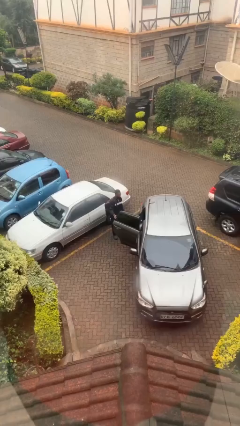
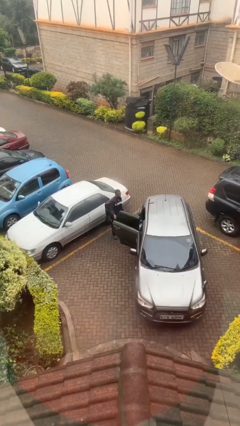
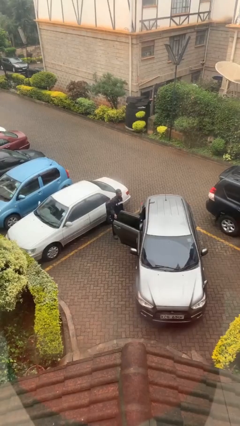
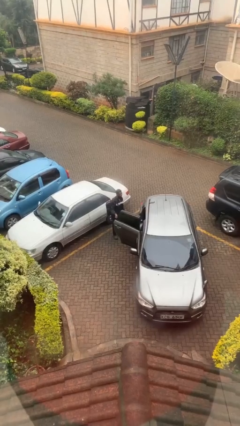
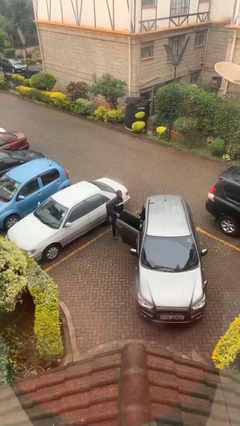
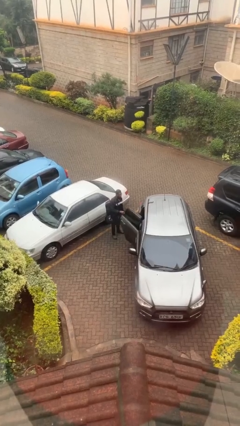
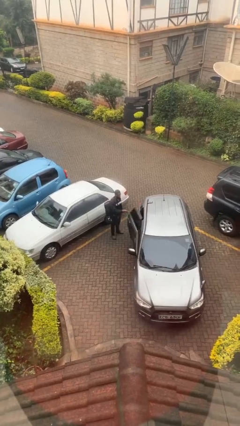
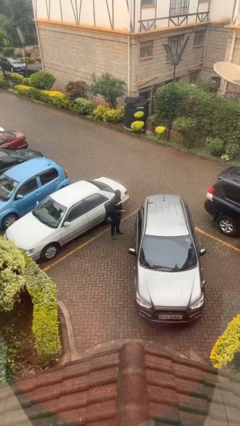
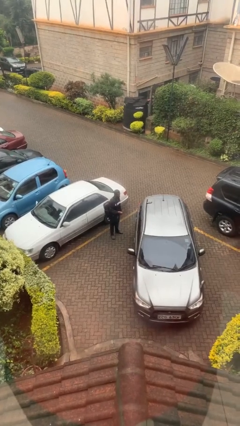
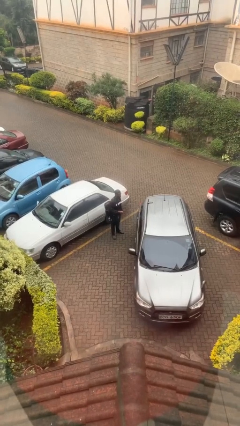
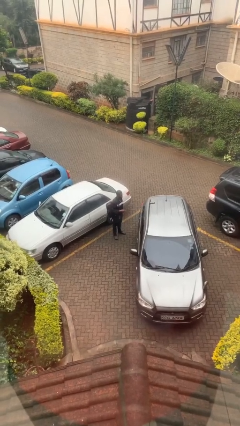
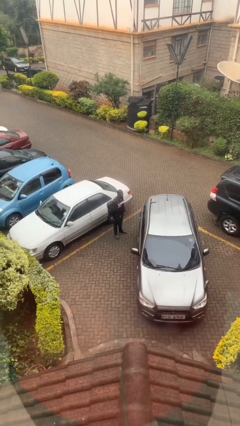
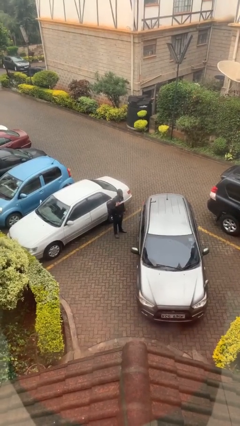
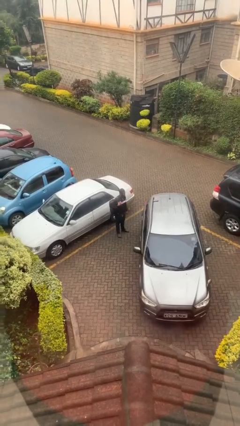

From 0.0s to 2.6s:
person closes car door

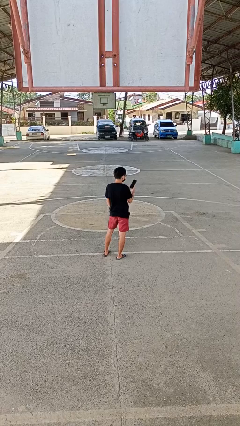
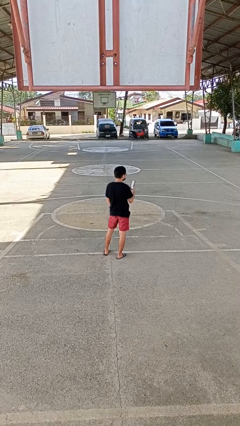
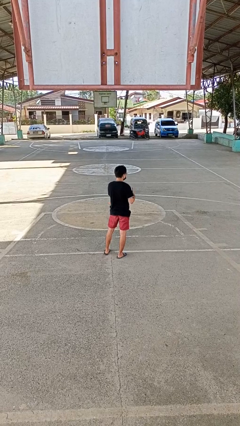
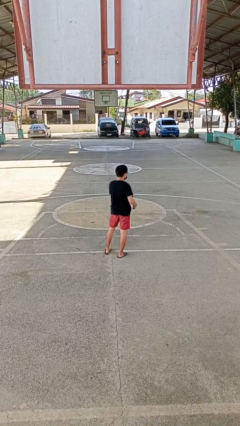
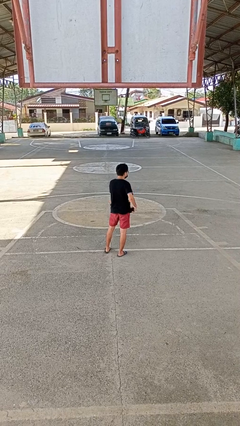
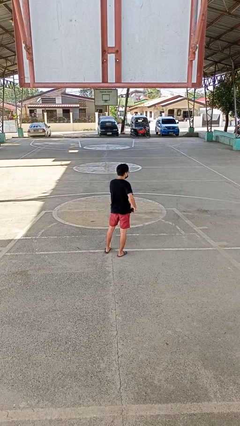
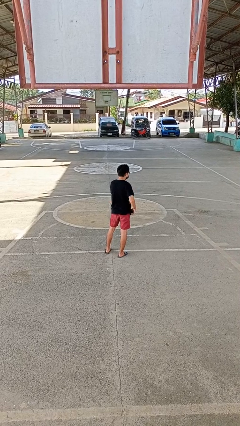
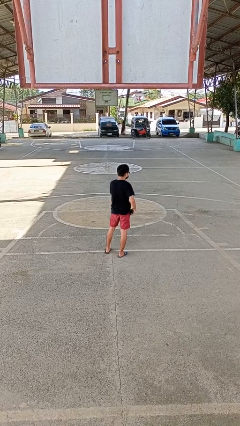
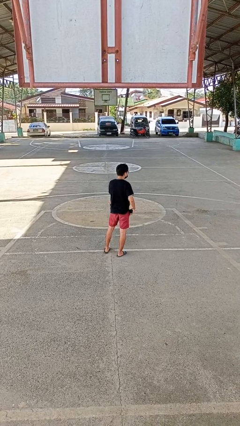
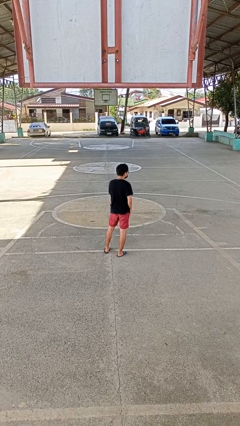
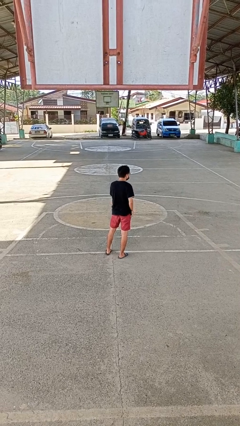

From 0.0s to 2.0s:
person puts phone into pocket

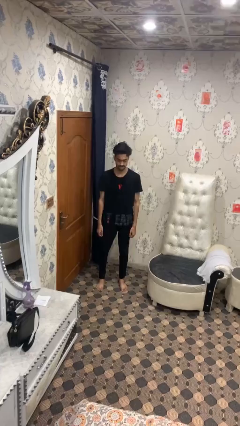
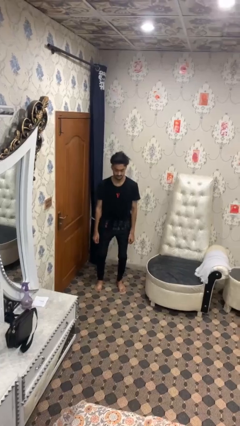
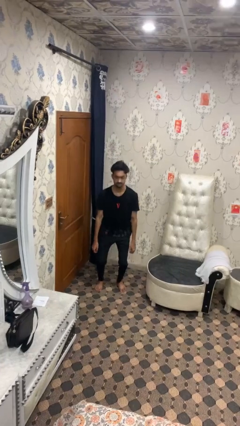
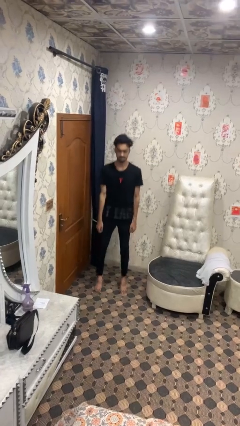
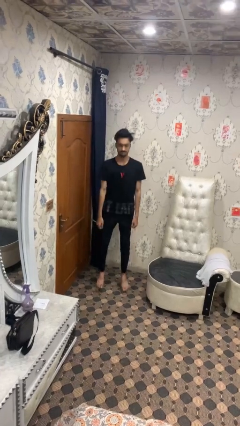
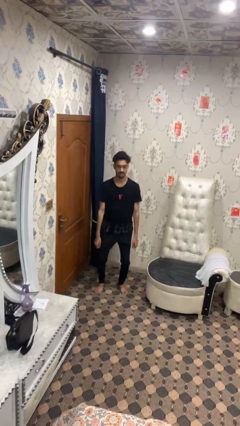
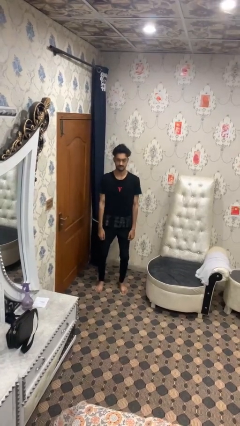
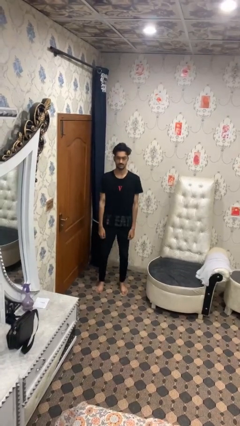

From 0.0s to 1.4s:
person jumps

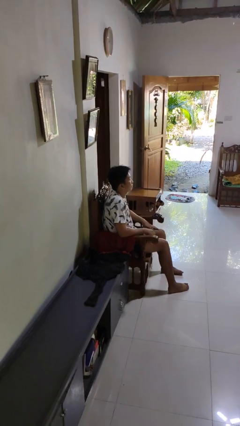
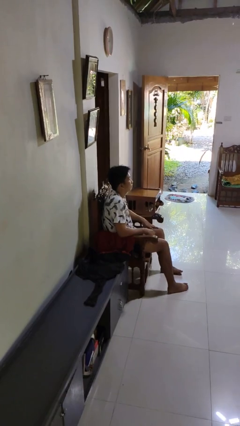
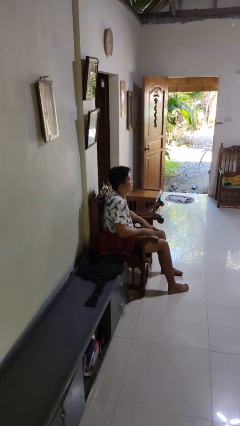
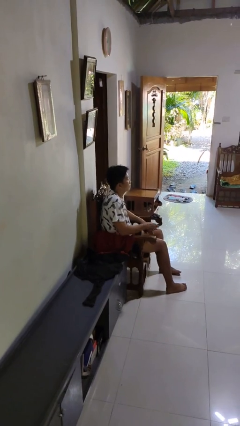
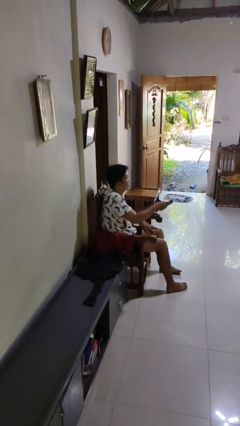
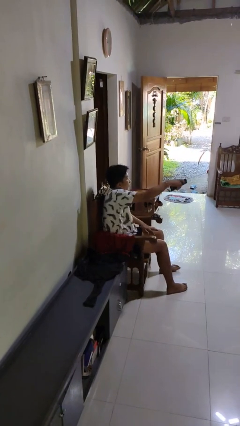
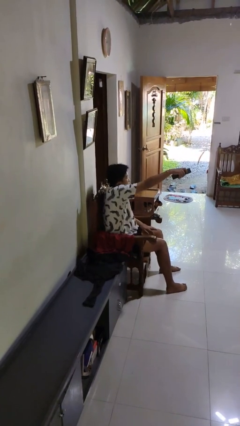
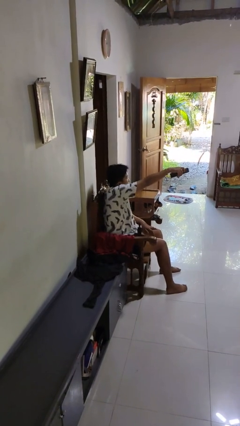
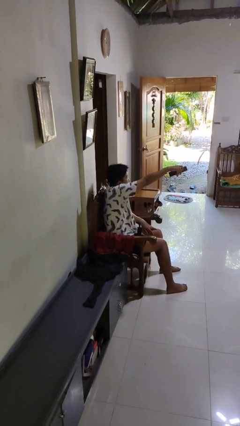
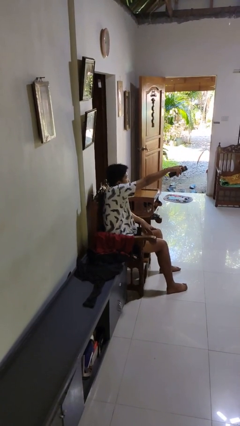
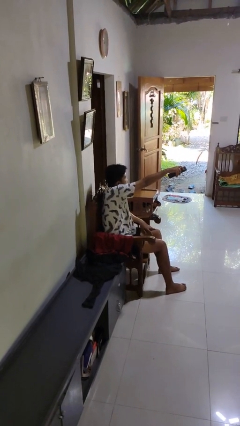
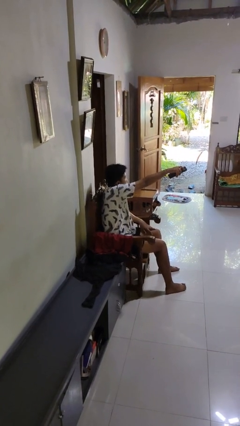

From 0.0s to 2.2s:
person uses television remote

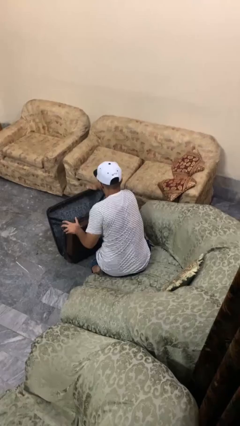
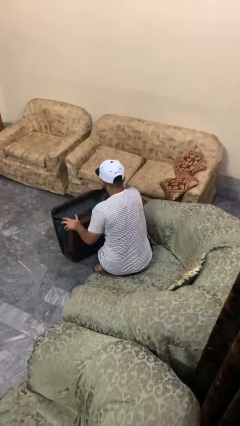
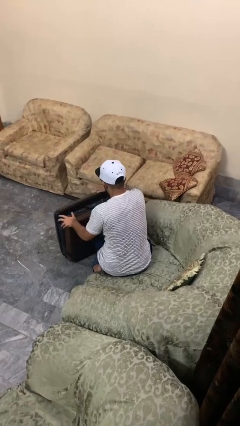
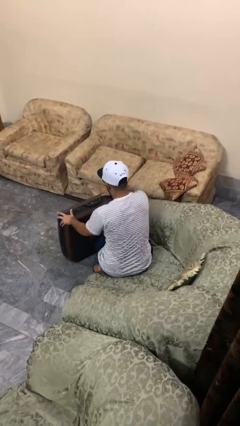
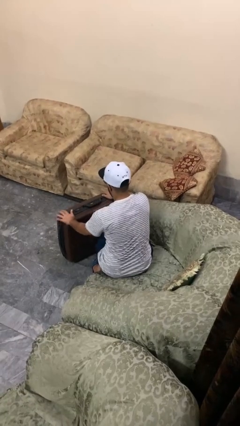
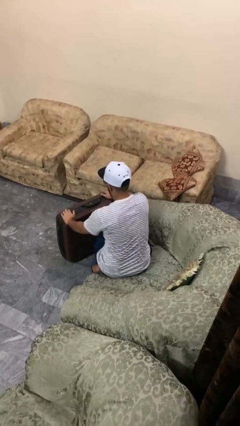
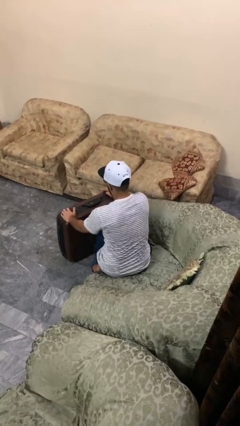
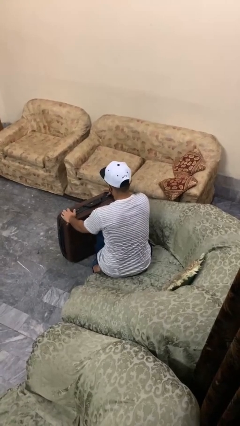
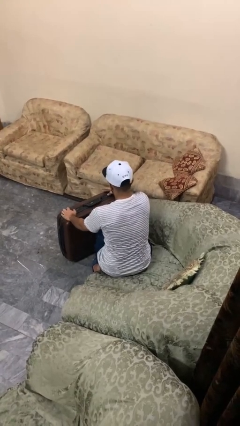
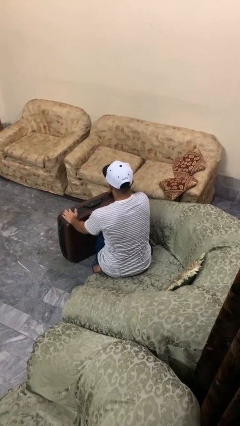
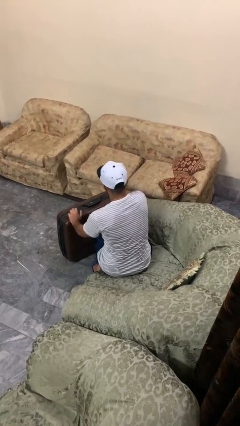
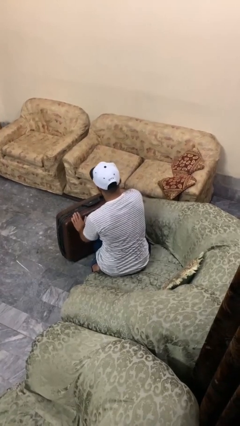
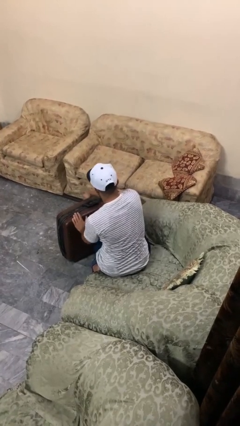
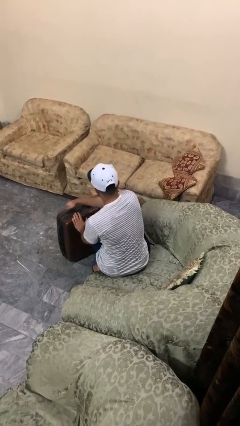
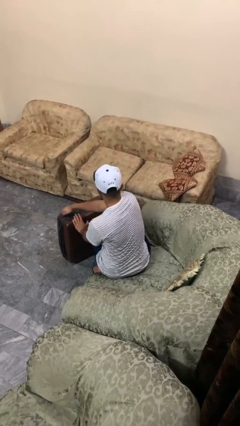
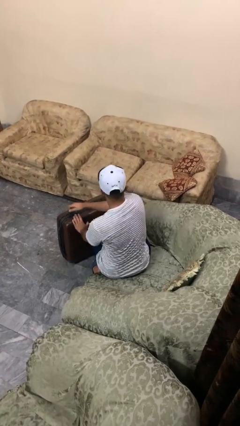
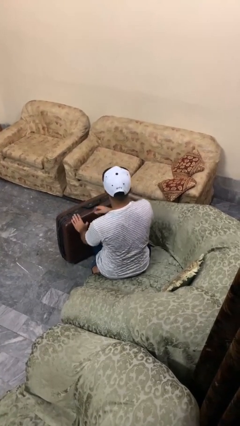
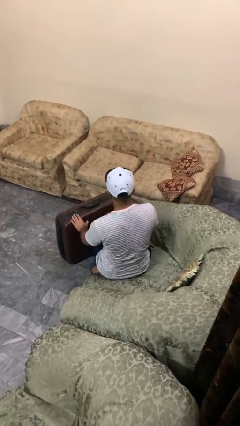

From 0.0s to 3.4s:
person closes suitcase

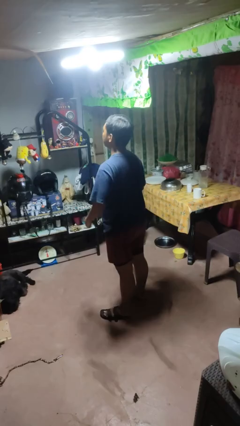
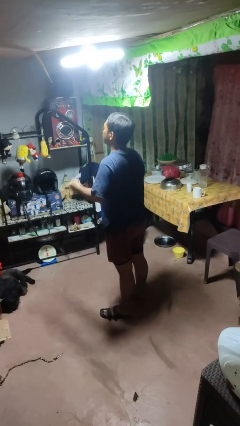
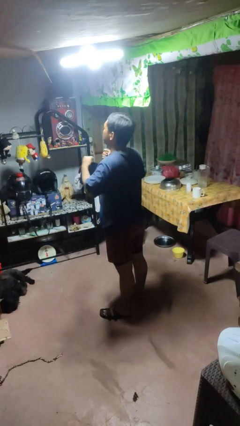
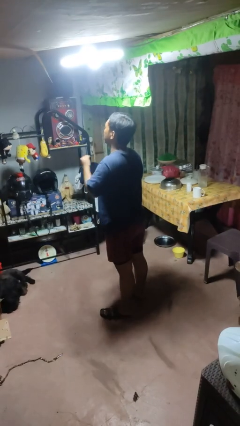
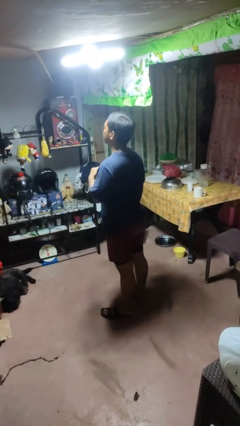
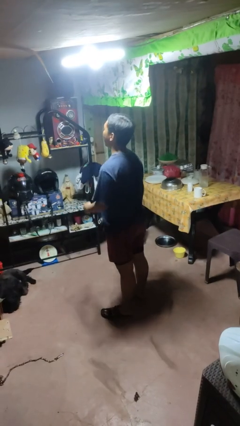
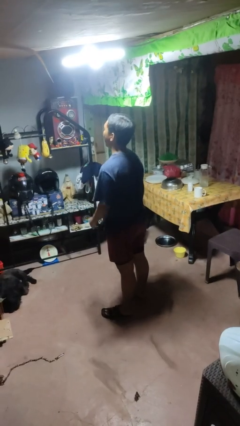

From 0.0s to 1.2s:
person drums on chest

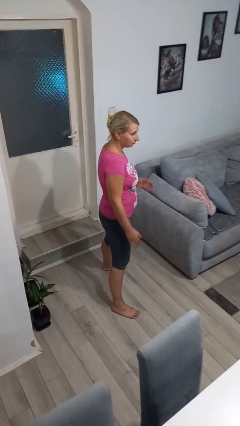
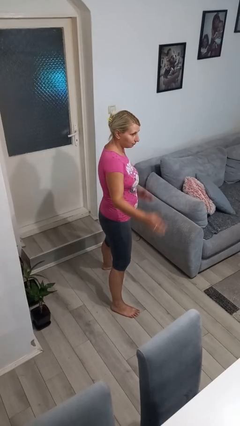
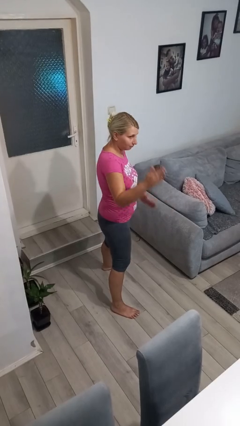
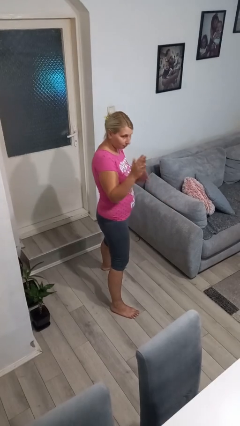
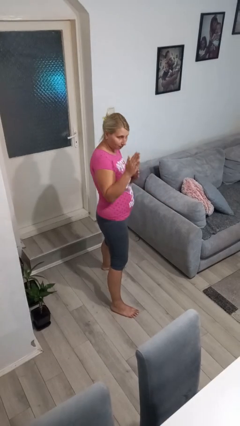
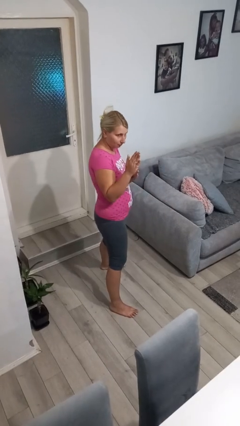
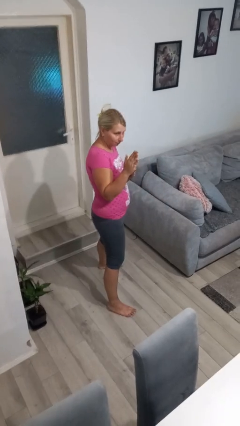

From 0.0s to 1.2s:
person karate chop

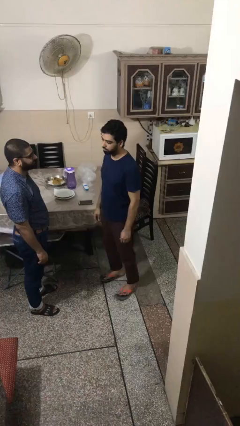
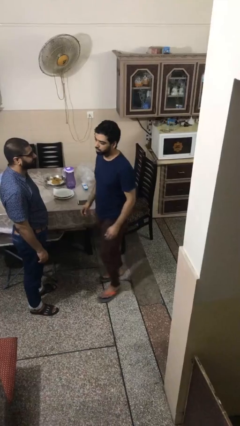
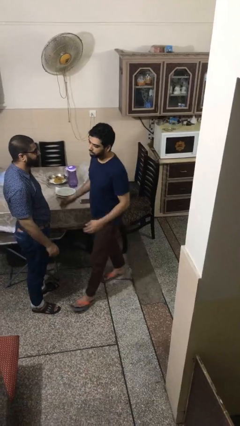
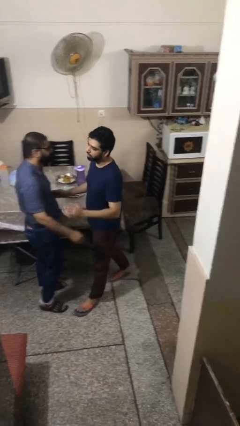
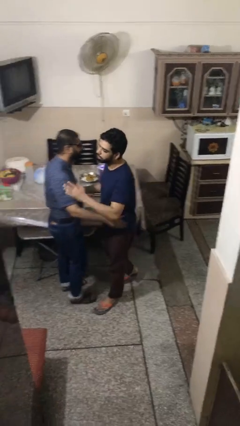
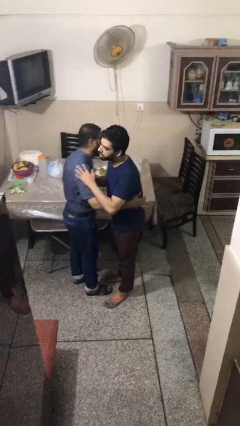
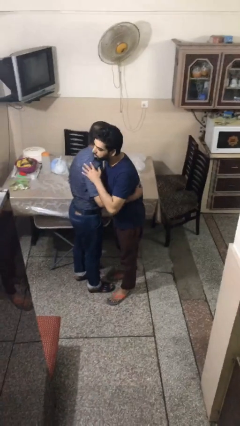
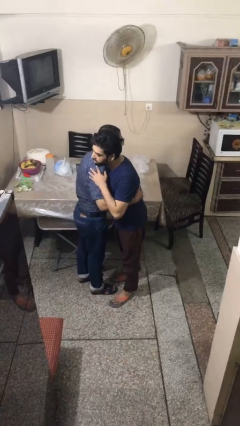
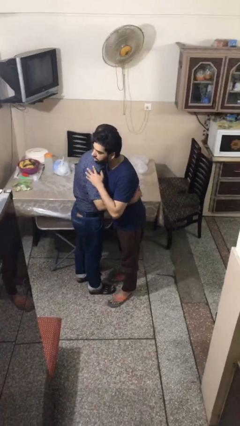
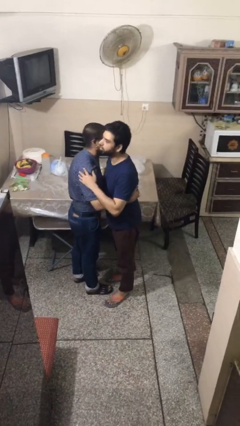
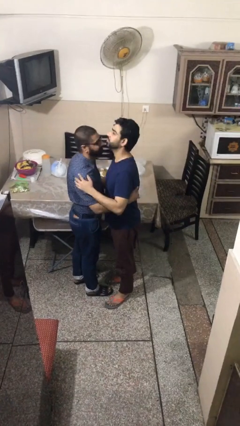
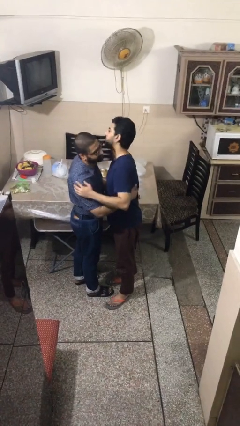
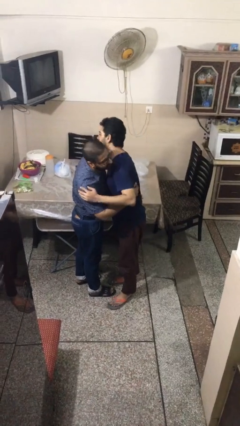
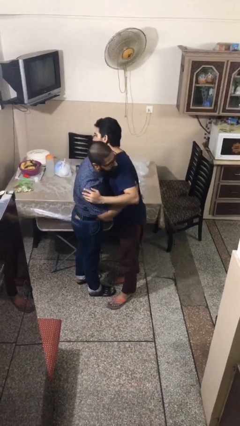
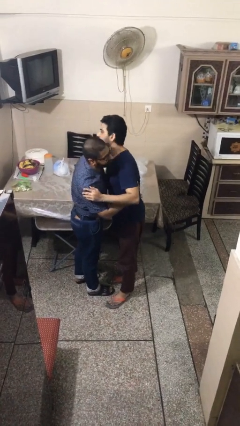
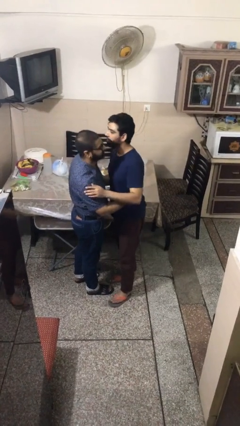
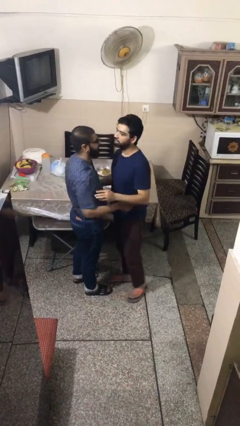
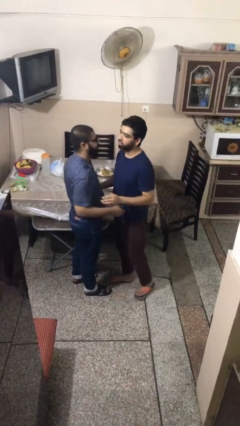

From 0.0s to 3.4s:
person embraces person
